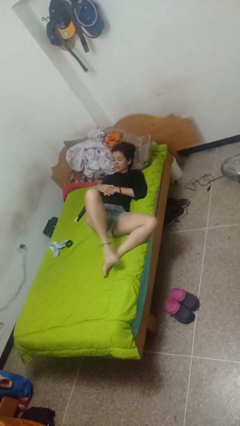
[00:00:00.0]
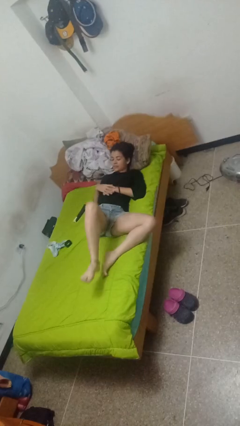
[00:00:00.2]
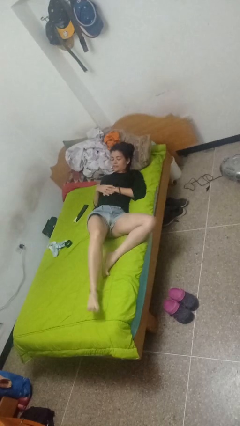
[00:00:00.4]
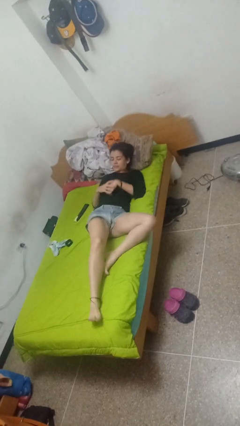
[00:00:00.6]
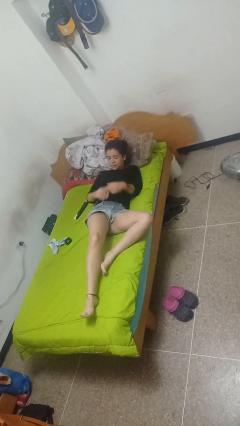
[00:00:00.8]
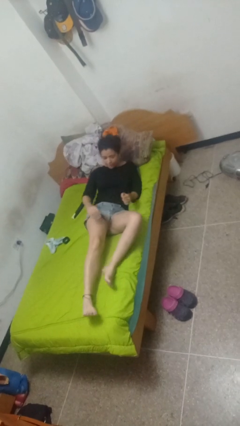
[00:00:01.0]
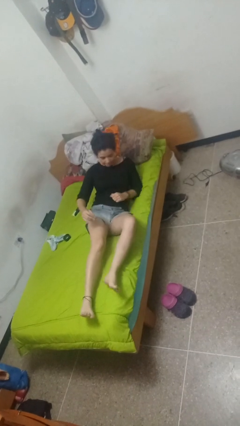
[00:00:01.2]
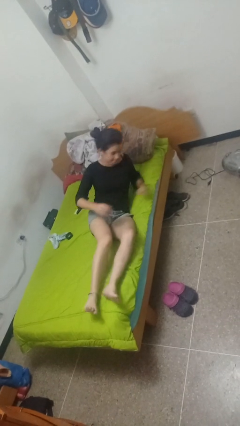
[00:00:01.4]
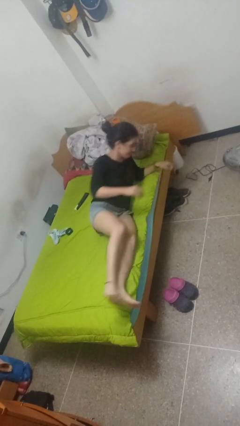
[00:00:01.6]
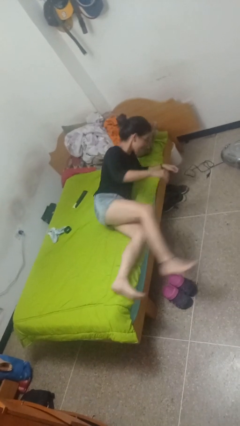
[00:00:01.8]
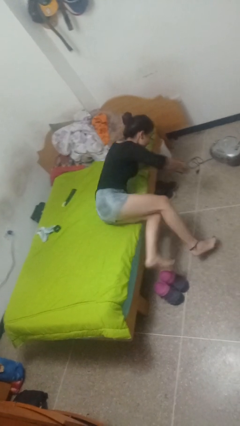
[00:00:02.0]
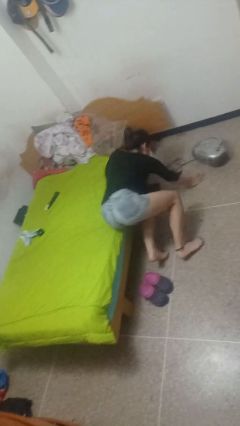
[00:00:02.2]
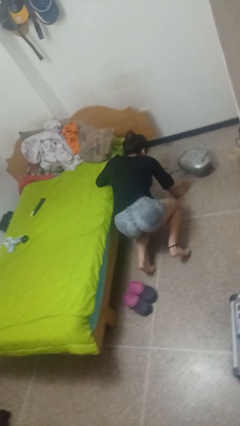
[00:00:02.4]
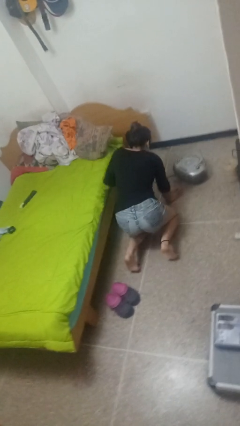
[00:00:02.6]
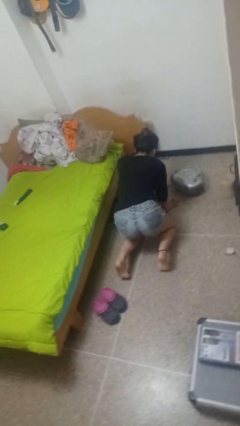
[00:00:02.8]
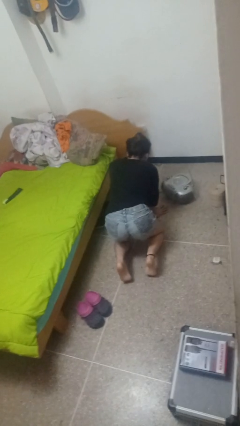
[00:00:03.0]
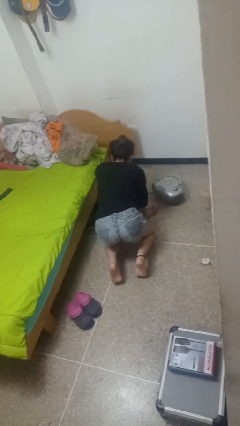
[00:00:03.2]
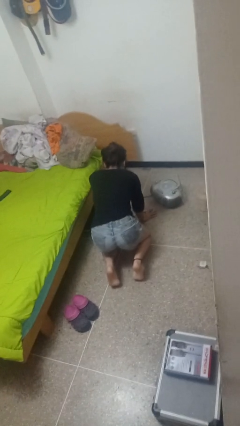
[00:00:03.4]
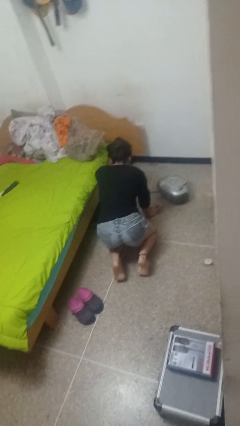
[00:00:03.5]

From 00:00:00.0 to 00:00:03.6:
person falls from bed

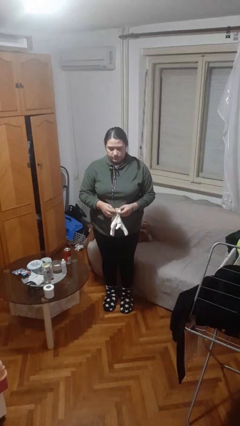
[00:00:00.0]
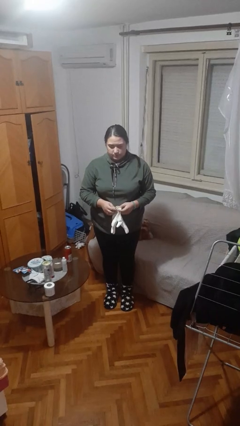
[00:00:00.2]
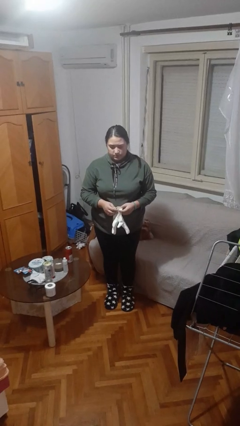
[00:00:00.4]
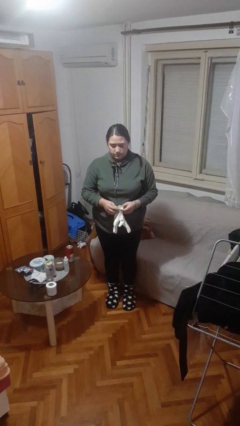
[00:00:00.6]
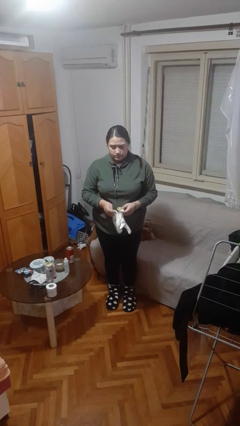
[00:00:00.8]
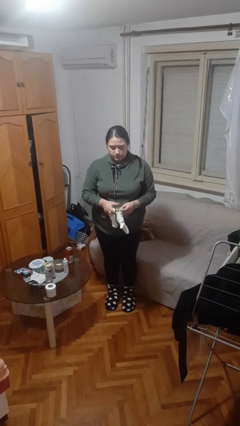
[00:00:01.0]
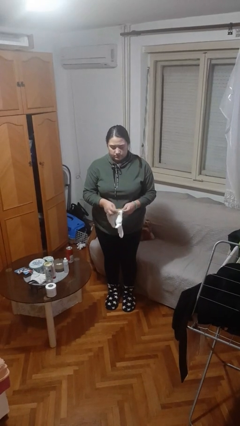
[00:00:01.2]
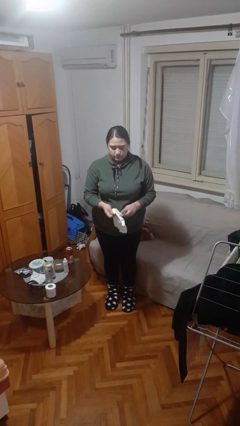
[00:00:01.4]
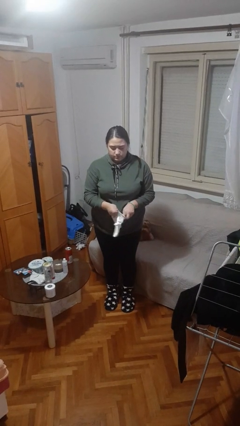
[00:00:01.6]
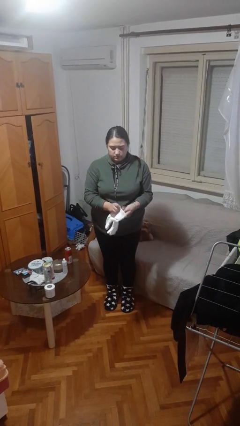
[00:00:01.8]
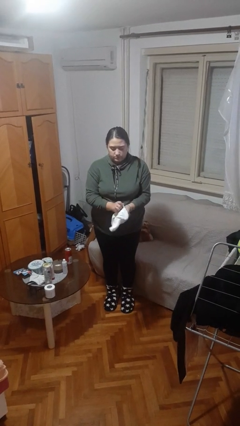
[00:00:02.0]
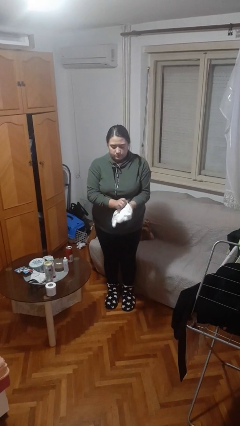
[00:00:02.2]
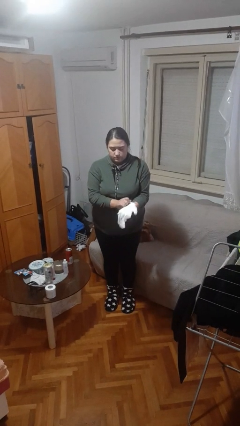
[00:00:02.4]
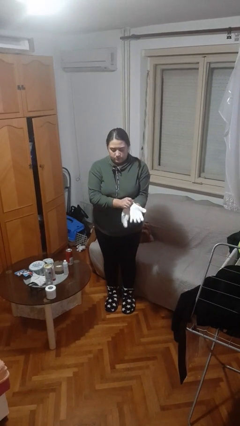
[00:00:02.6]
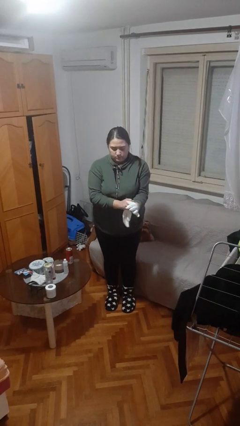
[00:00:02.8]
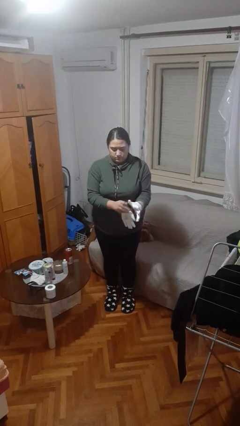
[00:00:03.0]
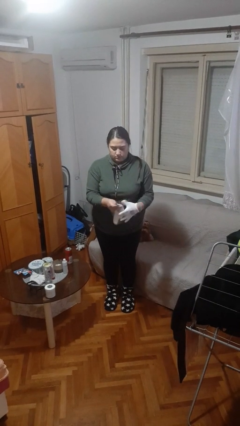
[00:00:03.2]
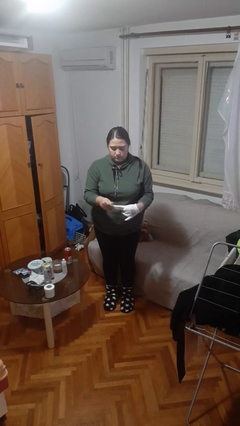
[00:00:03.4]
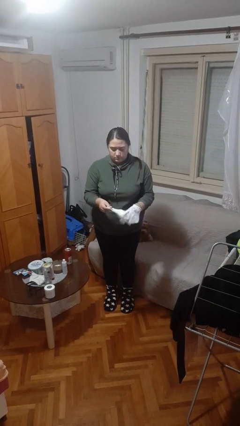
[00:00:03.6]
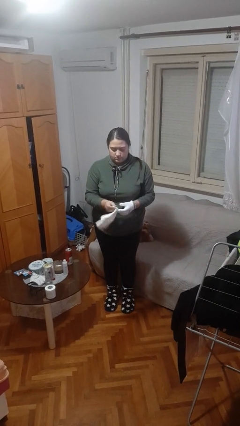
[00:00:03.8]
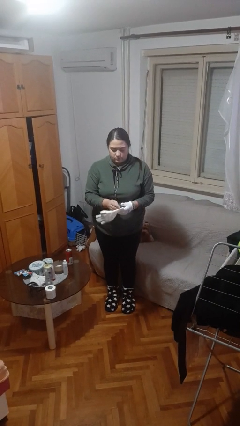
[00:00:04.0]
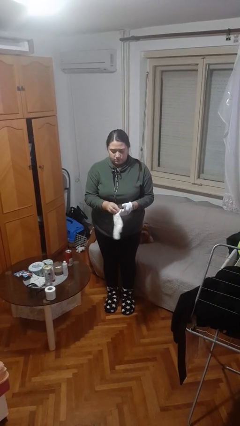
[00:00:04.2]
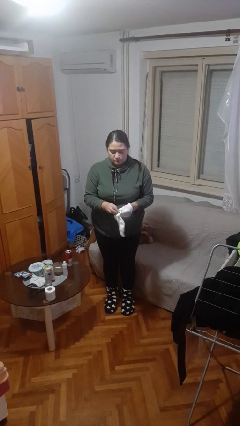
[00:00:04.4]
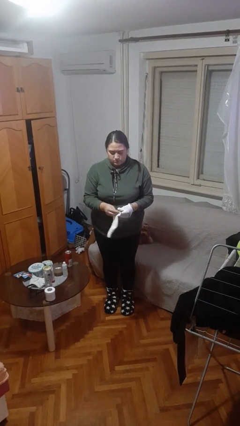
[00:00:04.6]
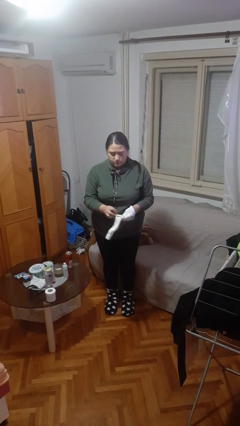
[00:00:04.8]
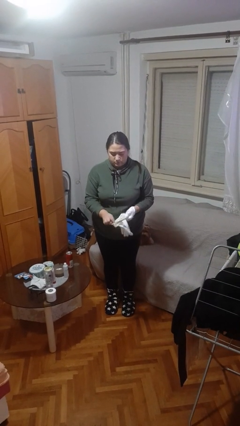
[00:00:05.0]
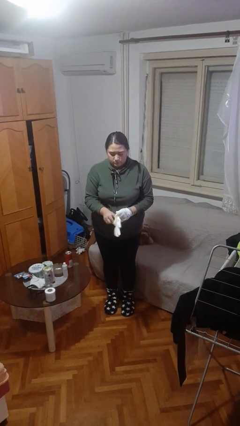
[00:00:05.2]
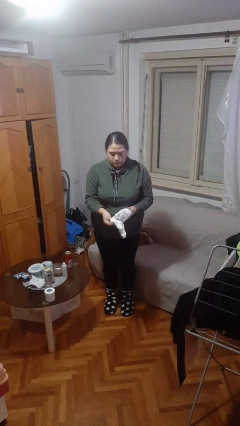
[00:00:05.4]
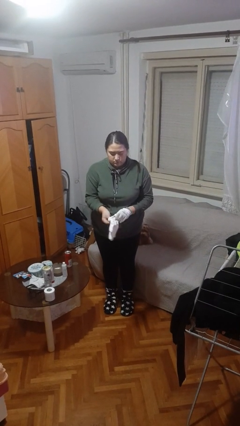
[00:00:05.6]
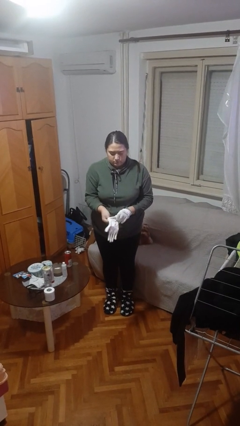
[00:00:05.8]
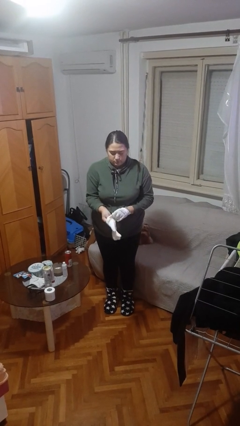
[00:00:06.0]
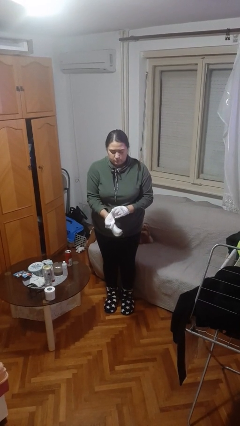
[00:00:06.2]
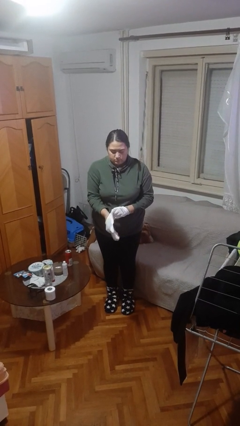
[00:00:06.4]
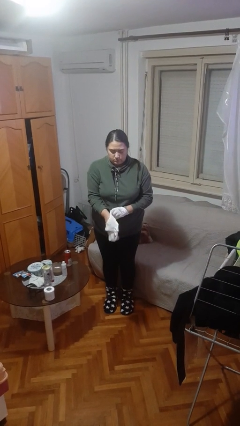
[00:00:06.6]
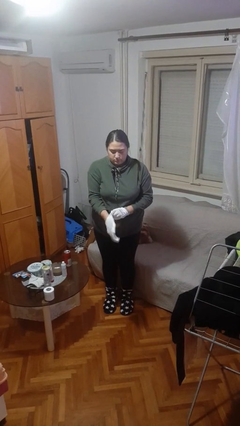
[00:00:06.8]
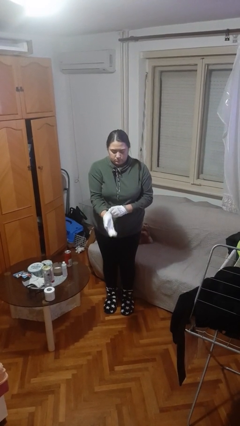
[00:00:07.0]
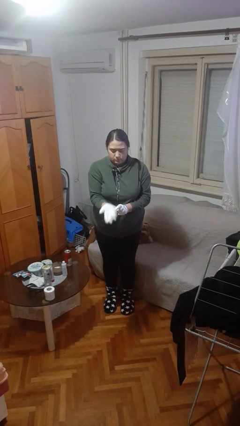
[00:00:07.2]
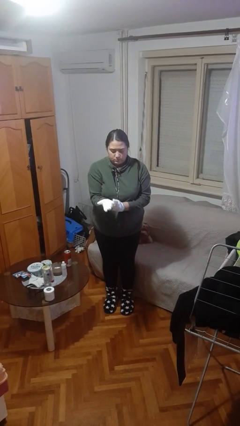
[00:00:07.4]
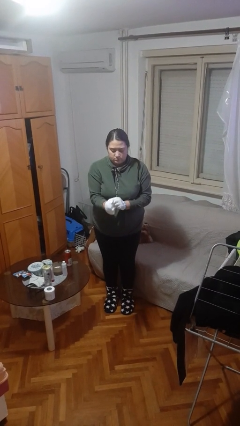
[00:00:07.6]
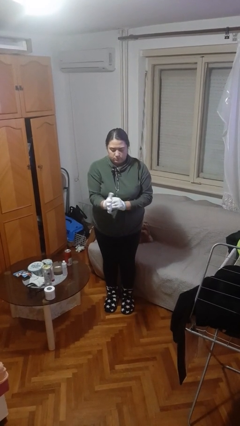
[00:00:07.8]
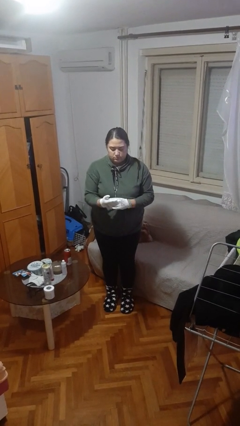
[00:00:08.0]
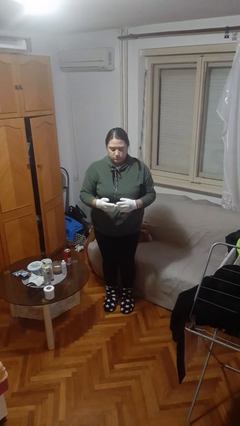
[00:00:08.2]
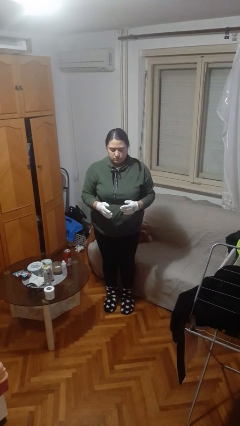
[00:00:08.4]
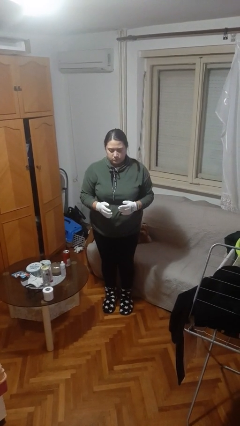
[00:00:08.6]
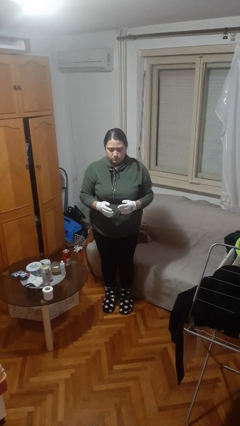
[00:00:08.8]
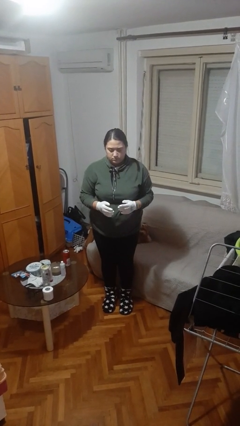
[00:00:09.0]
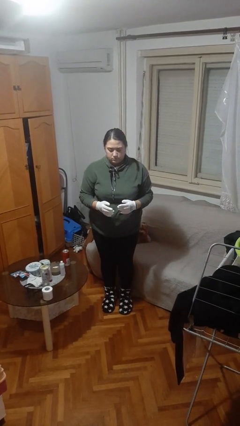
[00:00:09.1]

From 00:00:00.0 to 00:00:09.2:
person puts on gloves

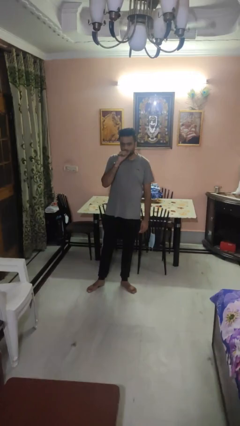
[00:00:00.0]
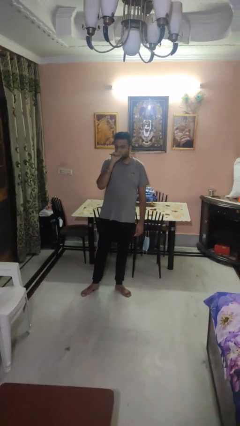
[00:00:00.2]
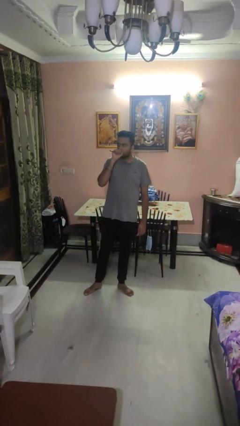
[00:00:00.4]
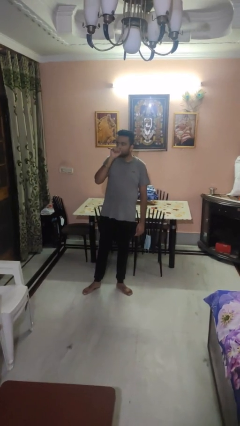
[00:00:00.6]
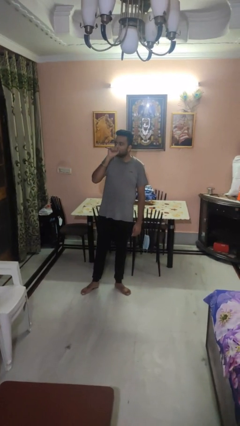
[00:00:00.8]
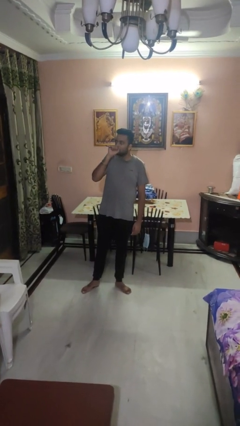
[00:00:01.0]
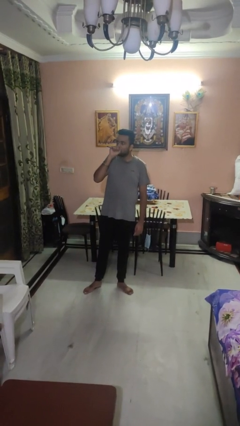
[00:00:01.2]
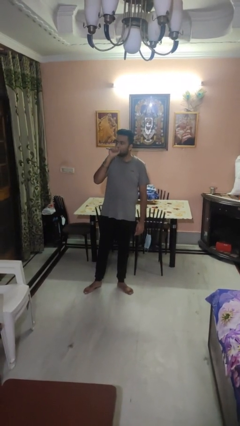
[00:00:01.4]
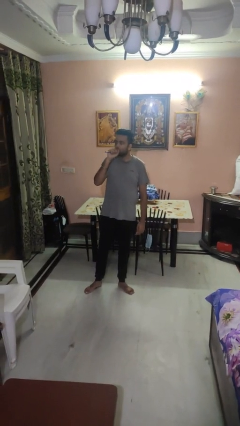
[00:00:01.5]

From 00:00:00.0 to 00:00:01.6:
person vapes

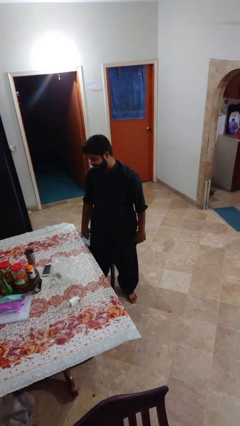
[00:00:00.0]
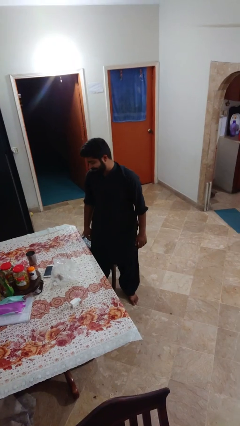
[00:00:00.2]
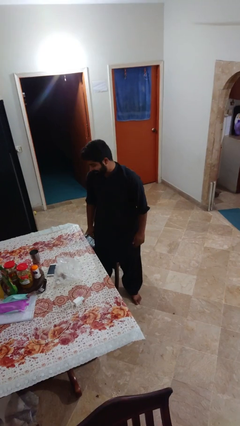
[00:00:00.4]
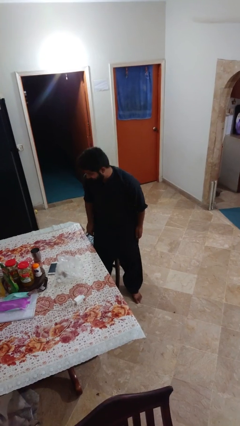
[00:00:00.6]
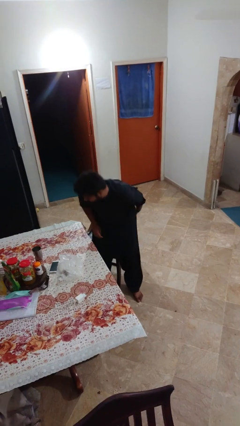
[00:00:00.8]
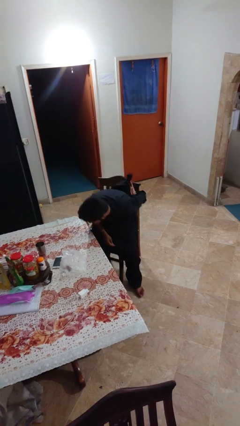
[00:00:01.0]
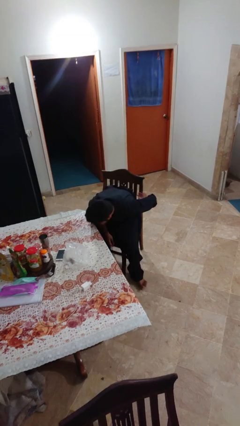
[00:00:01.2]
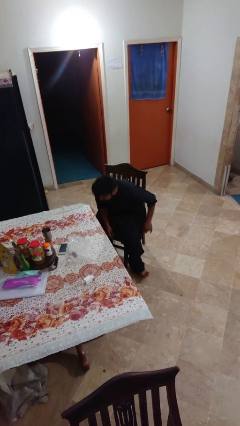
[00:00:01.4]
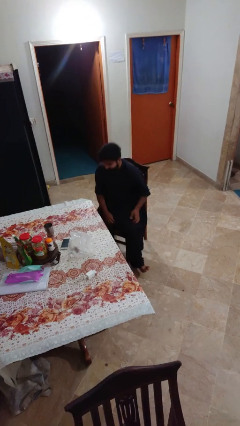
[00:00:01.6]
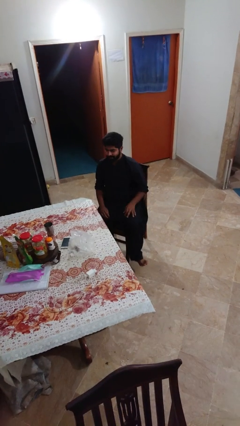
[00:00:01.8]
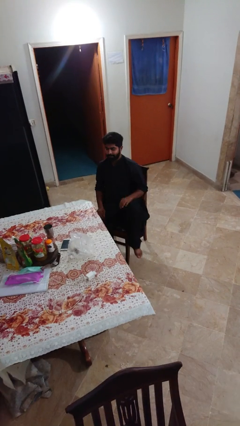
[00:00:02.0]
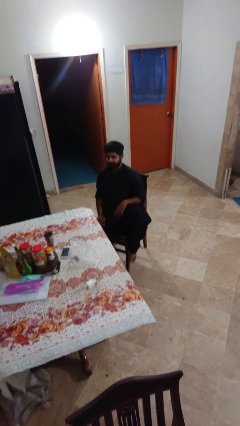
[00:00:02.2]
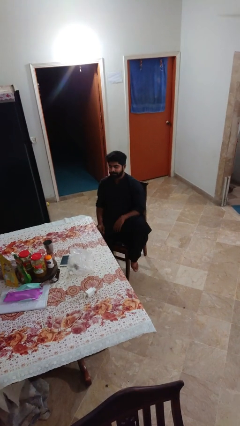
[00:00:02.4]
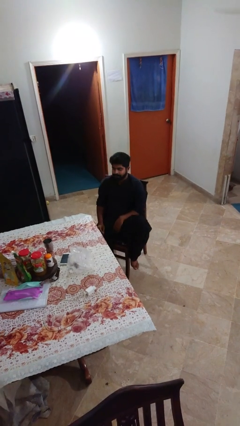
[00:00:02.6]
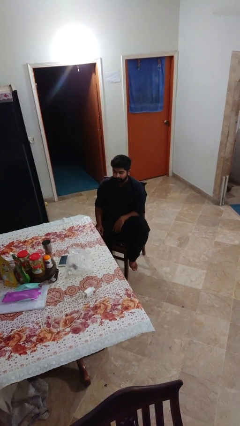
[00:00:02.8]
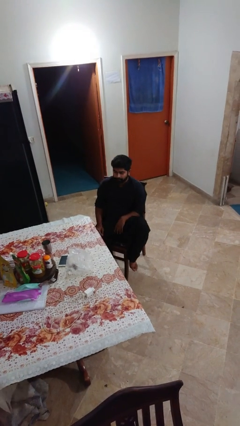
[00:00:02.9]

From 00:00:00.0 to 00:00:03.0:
person sits down
